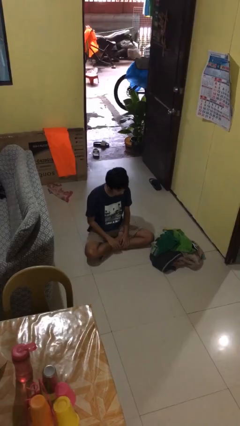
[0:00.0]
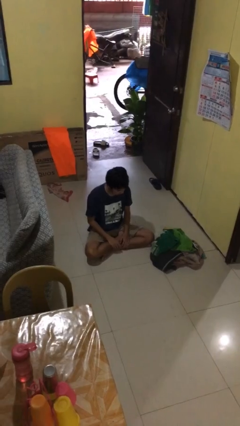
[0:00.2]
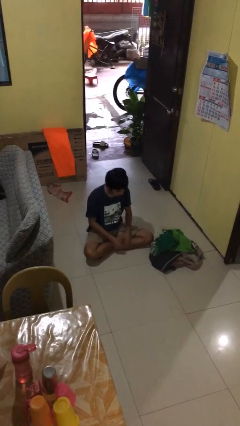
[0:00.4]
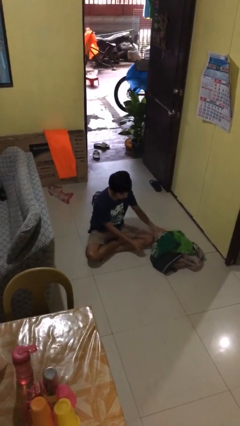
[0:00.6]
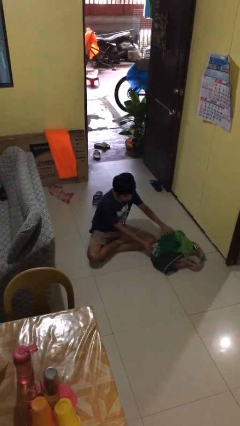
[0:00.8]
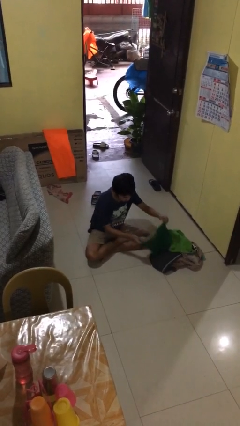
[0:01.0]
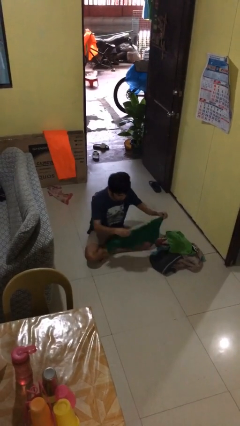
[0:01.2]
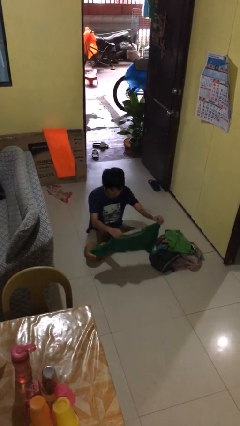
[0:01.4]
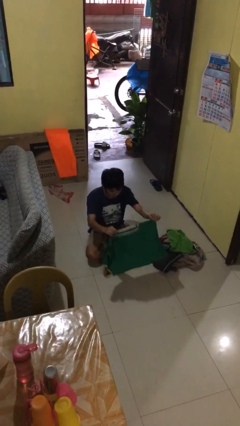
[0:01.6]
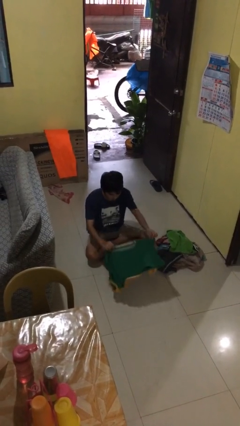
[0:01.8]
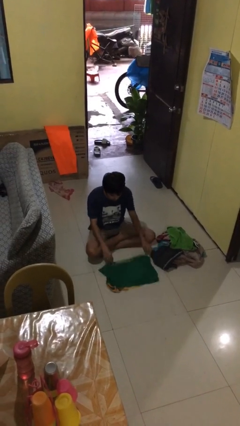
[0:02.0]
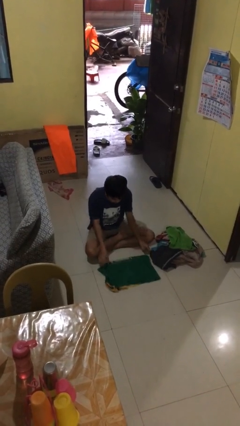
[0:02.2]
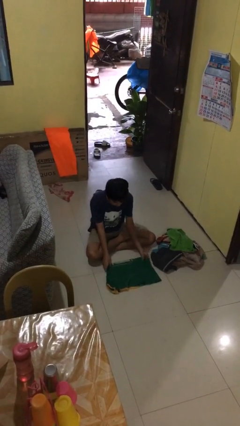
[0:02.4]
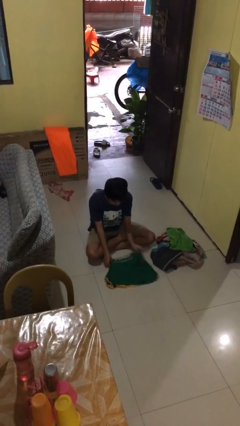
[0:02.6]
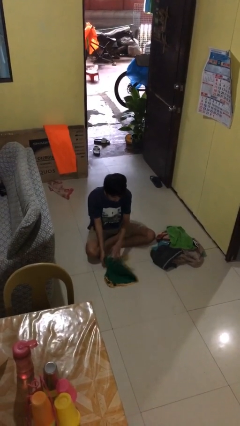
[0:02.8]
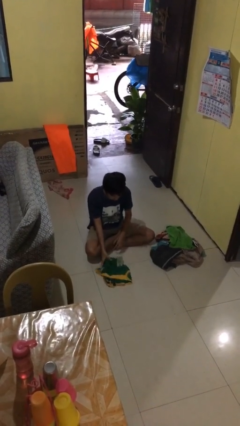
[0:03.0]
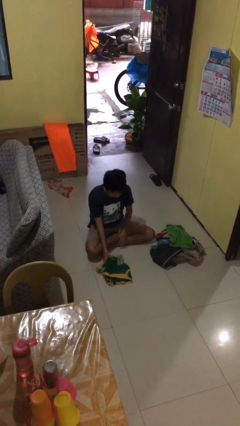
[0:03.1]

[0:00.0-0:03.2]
person folds shirt

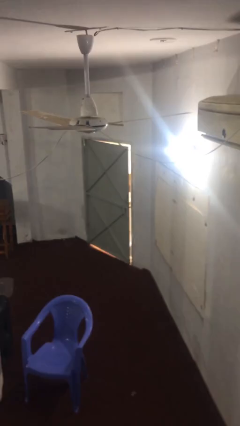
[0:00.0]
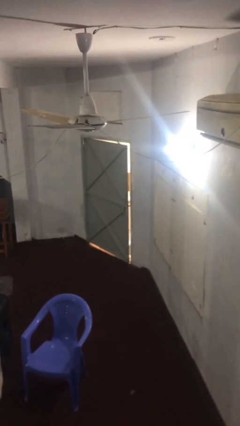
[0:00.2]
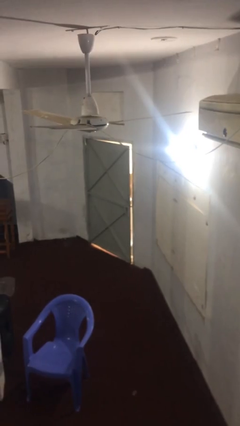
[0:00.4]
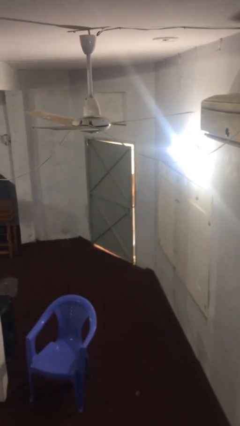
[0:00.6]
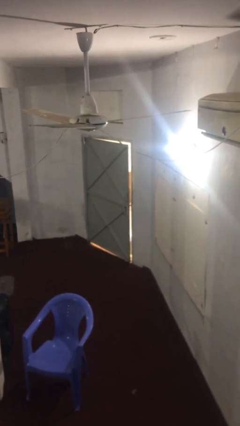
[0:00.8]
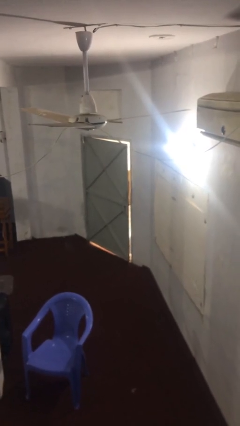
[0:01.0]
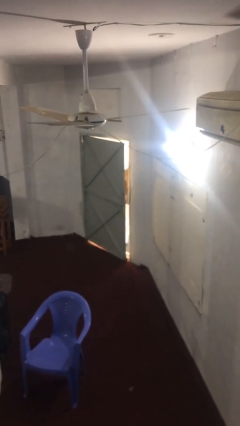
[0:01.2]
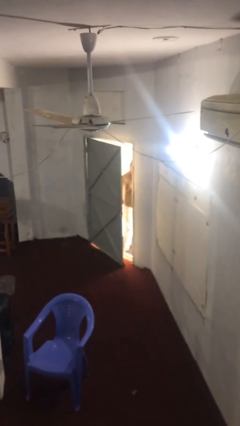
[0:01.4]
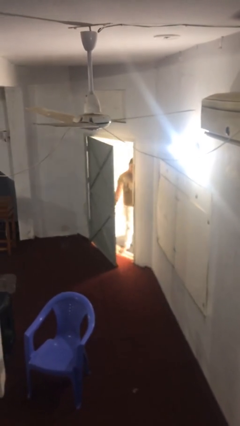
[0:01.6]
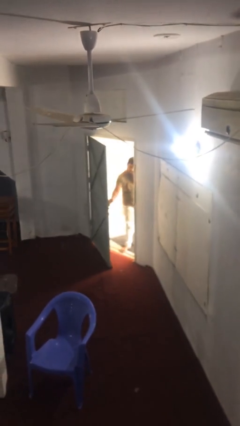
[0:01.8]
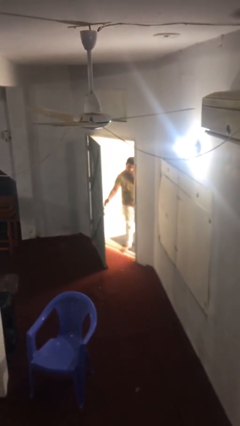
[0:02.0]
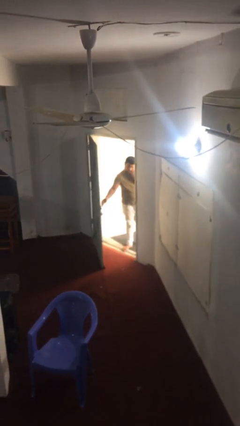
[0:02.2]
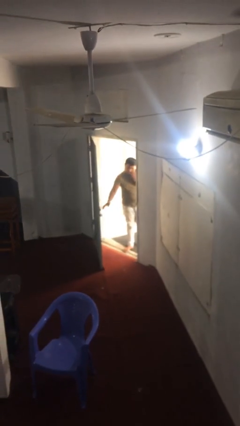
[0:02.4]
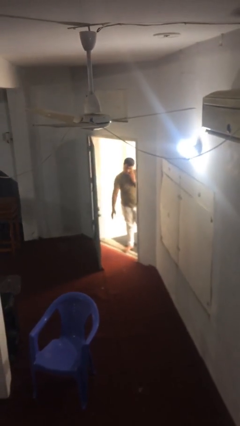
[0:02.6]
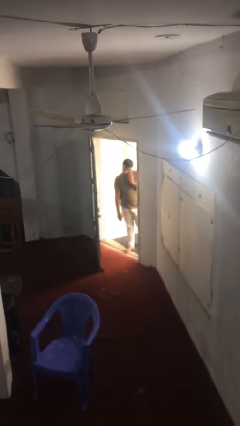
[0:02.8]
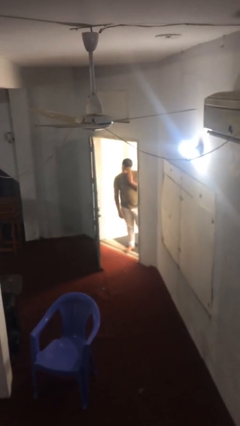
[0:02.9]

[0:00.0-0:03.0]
person opens facility door

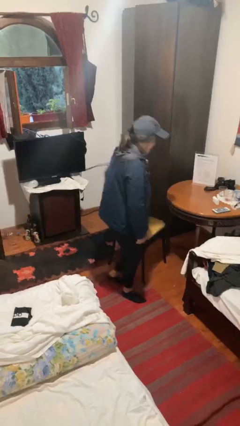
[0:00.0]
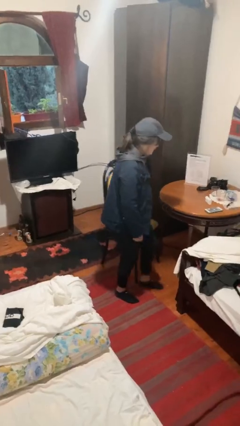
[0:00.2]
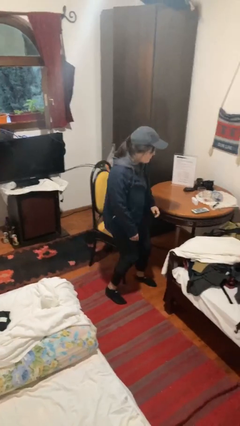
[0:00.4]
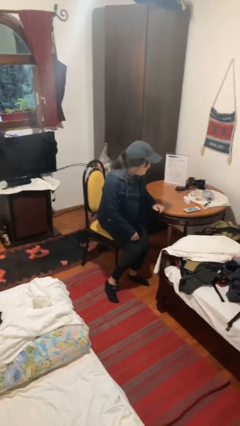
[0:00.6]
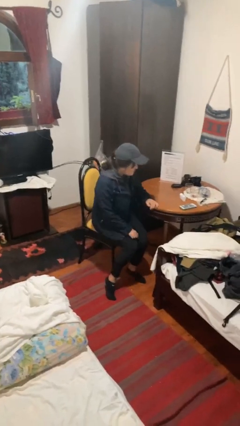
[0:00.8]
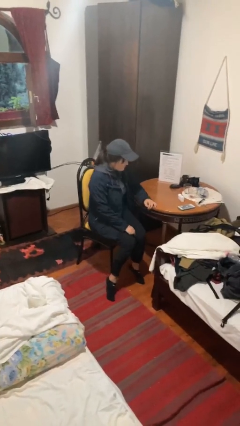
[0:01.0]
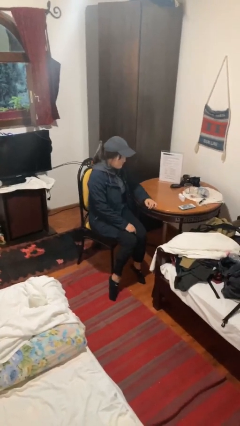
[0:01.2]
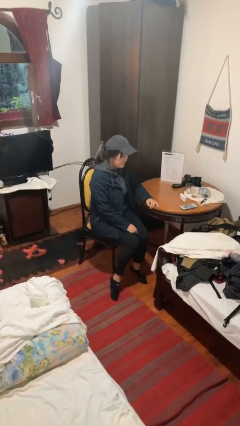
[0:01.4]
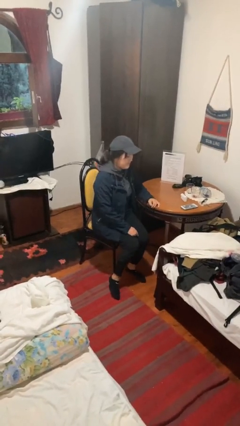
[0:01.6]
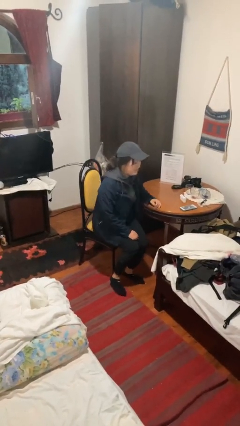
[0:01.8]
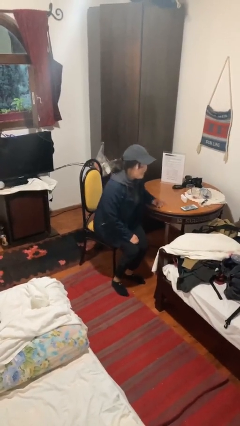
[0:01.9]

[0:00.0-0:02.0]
person sits down

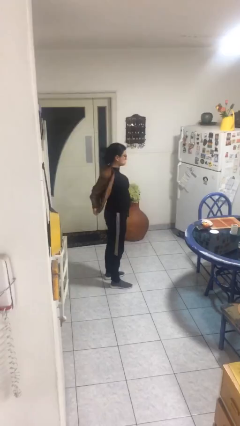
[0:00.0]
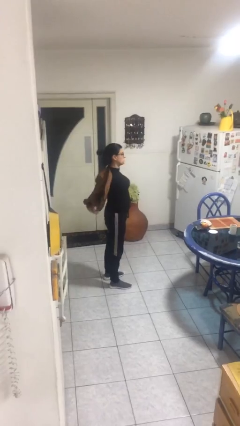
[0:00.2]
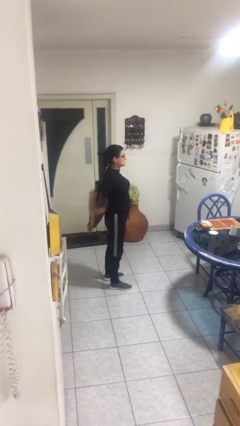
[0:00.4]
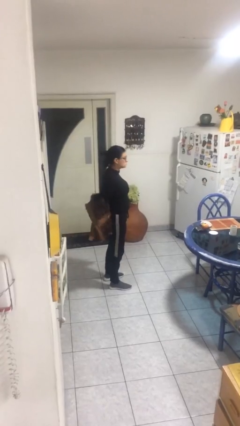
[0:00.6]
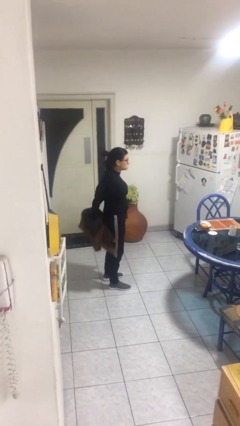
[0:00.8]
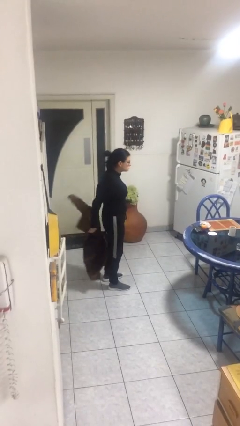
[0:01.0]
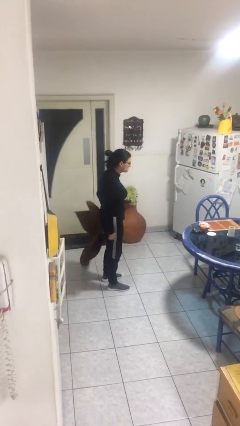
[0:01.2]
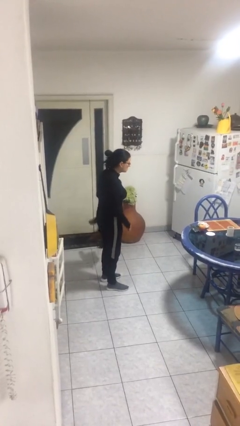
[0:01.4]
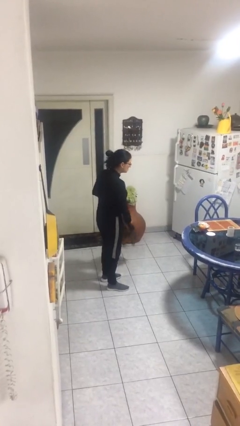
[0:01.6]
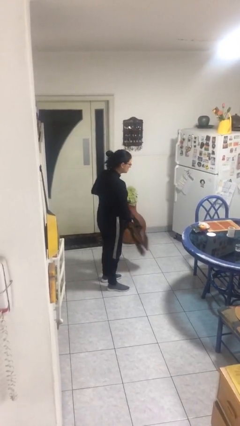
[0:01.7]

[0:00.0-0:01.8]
person takes off jacket

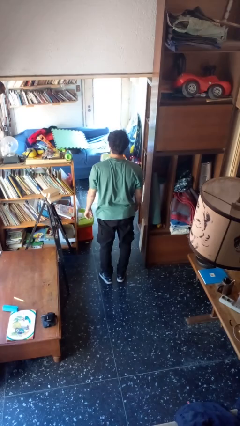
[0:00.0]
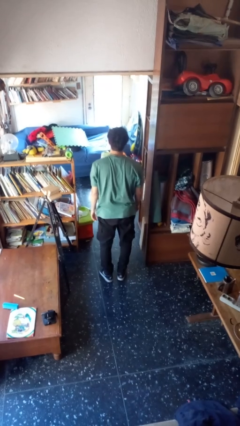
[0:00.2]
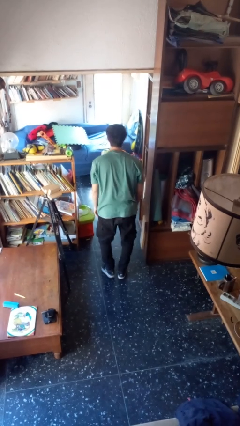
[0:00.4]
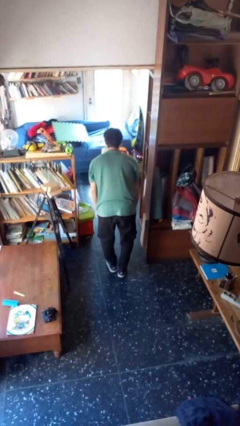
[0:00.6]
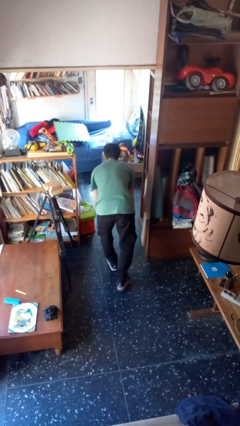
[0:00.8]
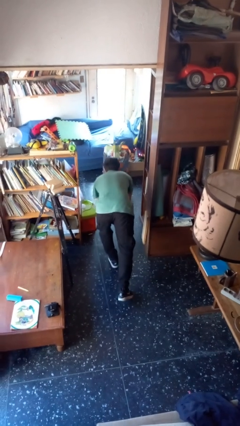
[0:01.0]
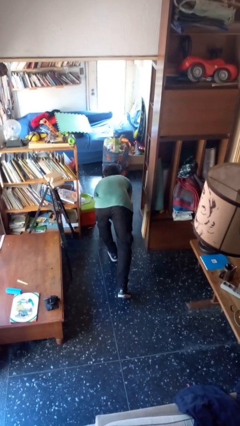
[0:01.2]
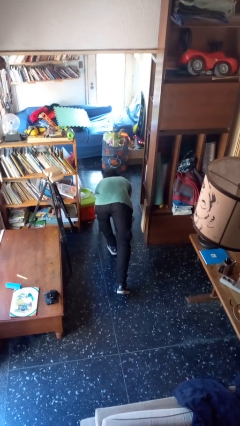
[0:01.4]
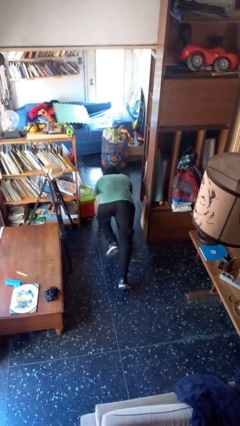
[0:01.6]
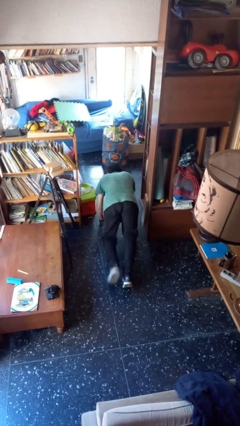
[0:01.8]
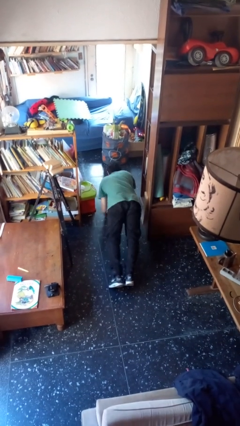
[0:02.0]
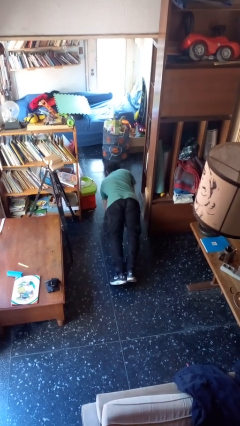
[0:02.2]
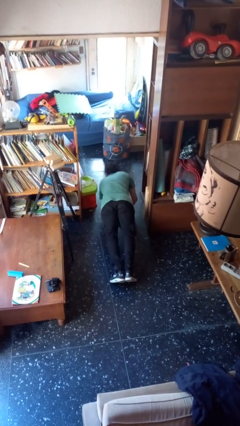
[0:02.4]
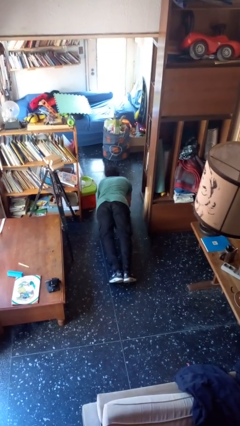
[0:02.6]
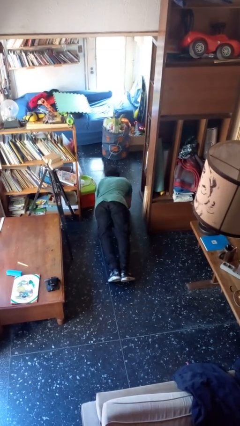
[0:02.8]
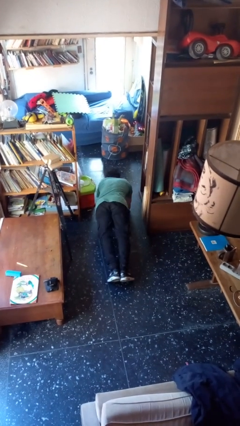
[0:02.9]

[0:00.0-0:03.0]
person exercises with plank

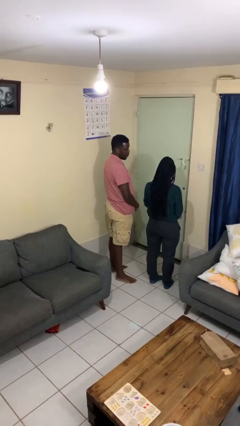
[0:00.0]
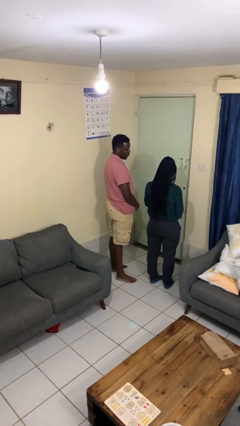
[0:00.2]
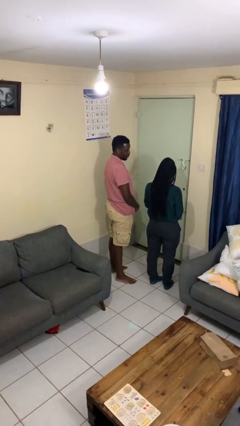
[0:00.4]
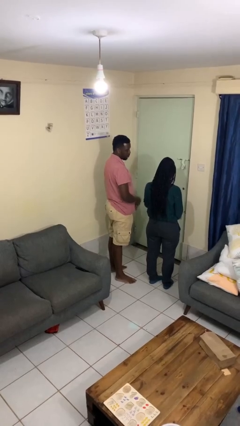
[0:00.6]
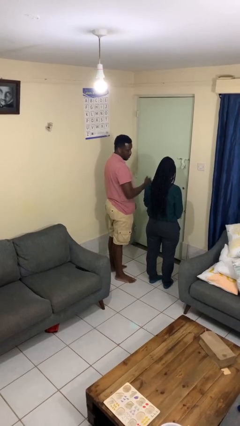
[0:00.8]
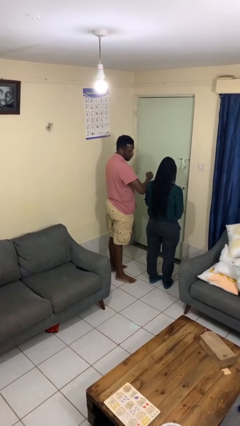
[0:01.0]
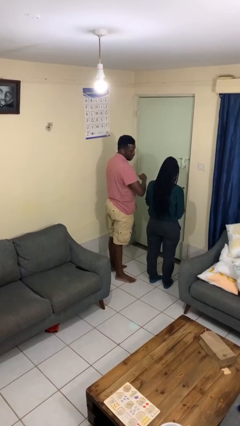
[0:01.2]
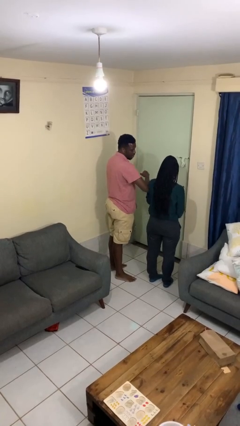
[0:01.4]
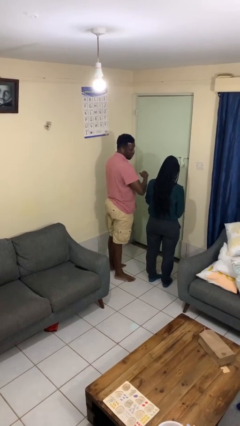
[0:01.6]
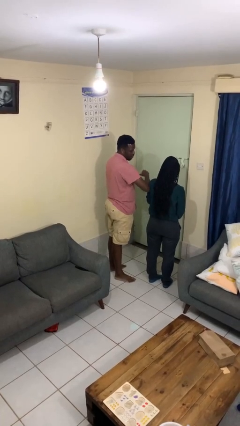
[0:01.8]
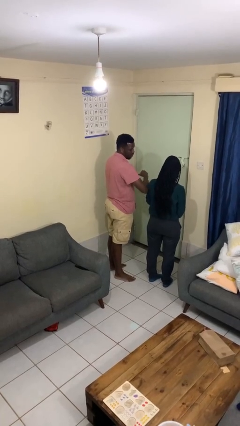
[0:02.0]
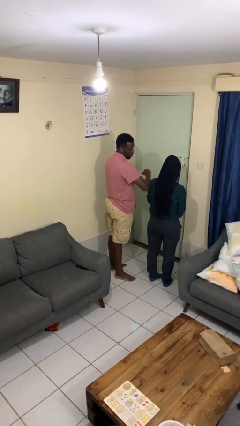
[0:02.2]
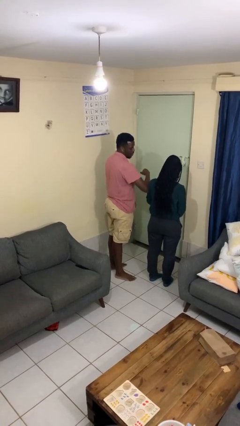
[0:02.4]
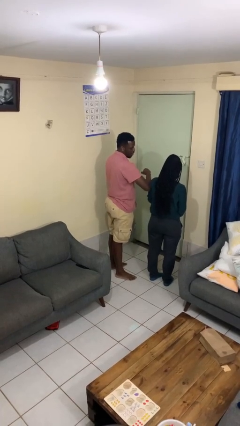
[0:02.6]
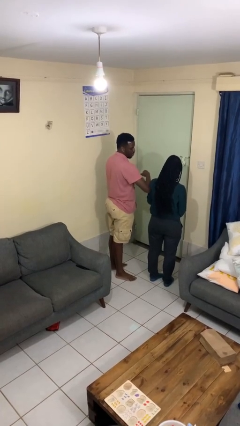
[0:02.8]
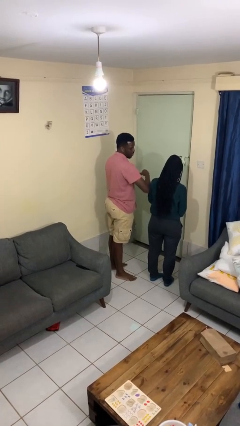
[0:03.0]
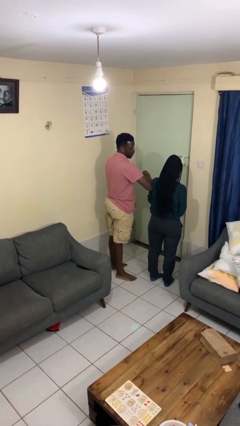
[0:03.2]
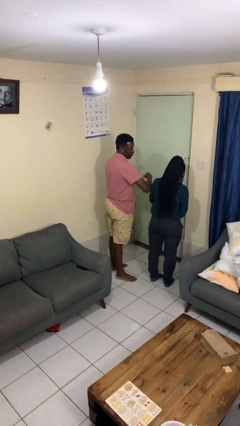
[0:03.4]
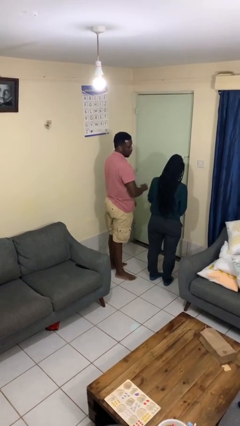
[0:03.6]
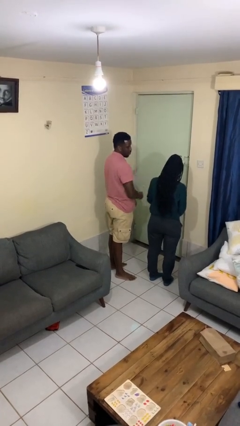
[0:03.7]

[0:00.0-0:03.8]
person nudges person with elbow

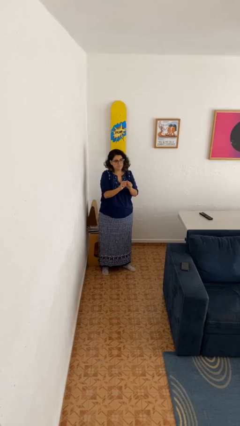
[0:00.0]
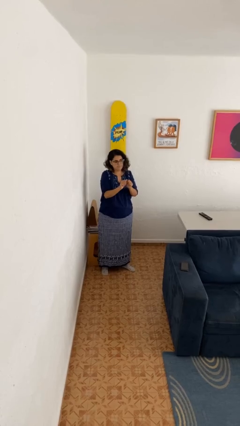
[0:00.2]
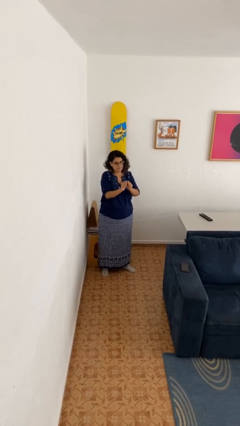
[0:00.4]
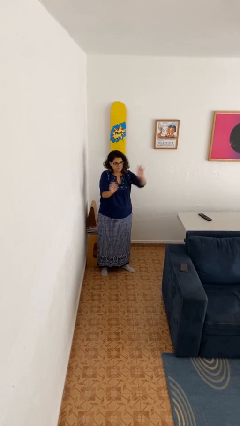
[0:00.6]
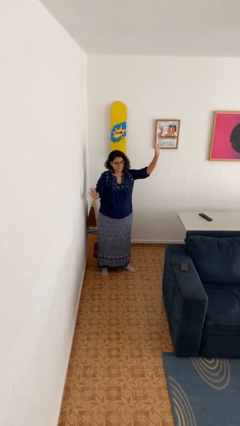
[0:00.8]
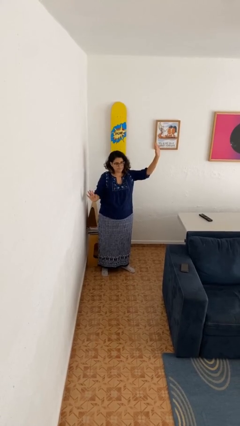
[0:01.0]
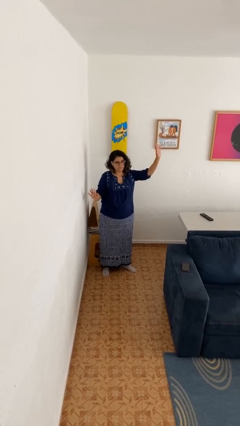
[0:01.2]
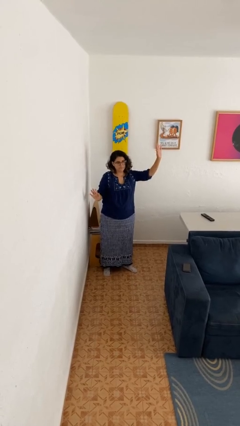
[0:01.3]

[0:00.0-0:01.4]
person gestures zoom in
